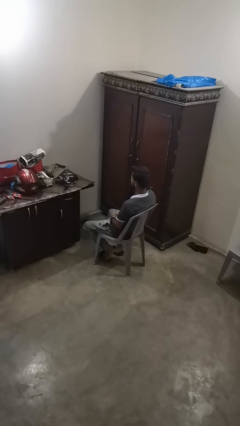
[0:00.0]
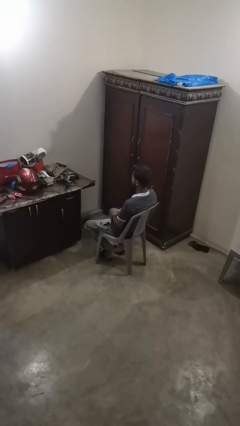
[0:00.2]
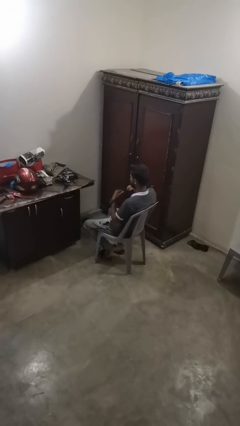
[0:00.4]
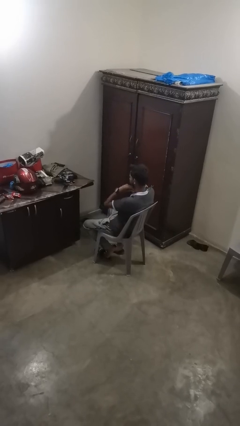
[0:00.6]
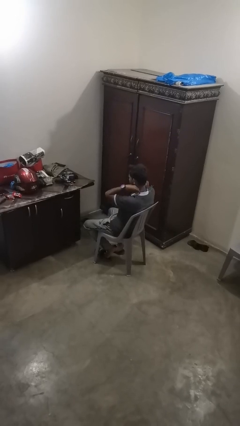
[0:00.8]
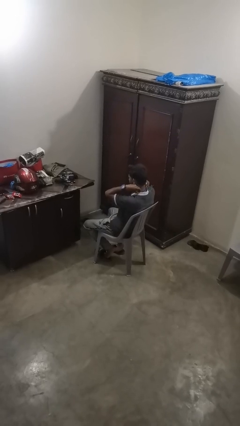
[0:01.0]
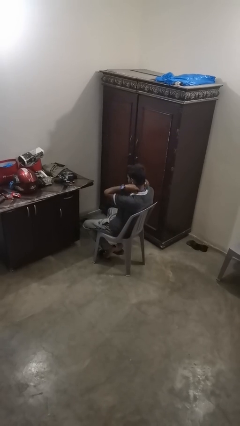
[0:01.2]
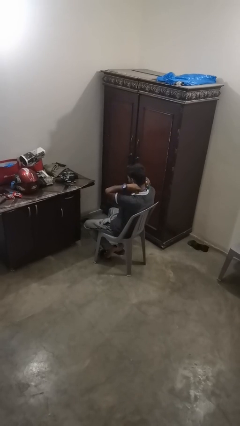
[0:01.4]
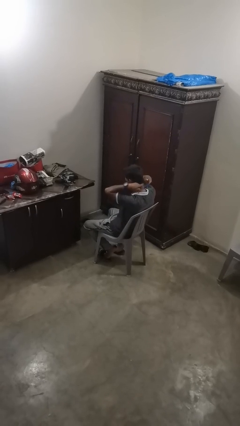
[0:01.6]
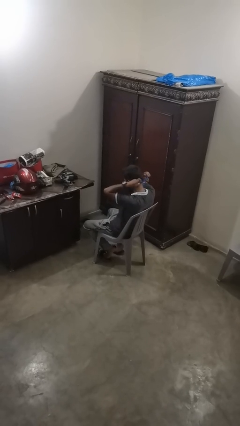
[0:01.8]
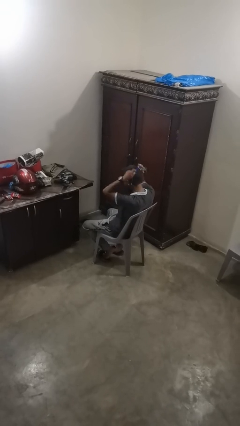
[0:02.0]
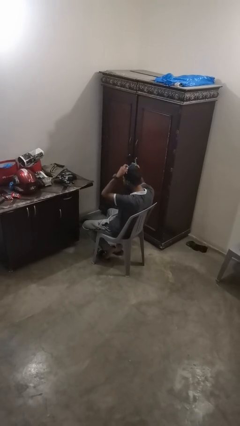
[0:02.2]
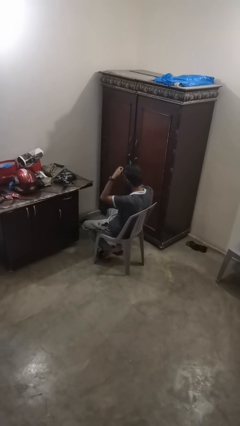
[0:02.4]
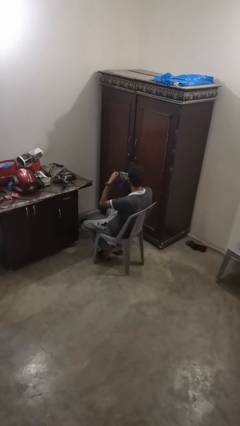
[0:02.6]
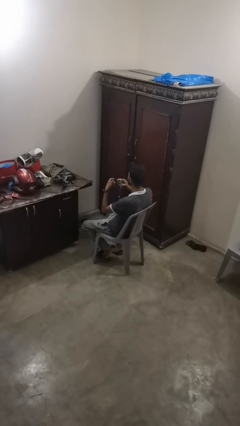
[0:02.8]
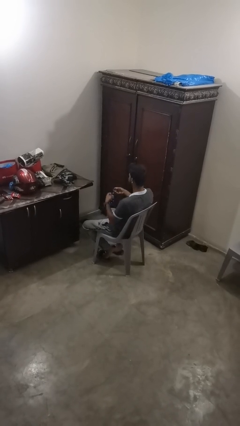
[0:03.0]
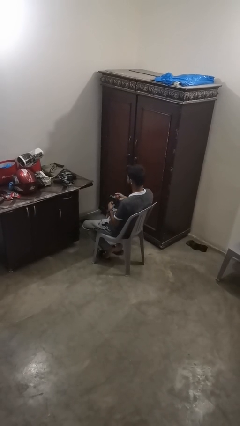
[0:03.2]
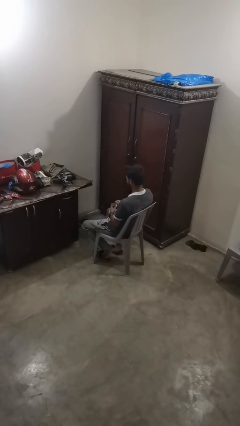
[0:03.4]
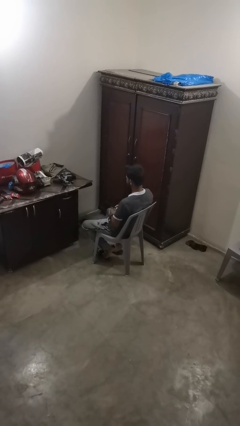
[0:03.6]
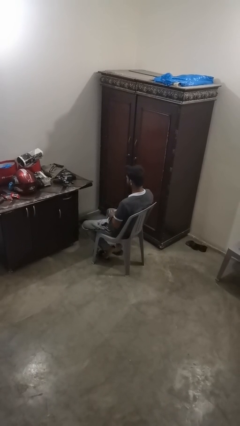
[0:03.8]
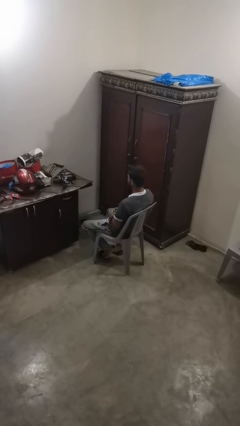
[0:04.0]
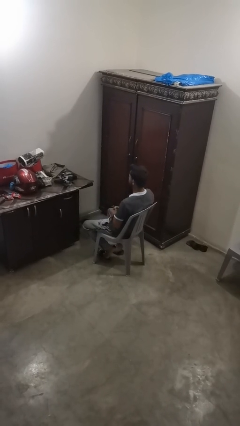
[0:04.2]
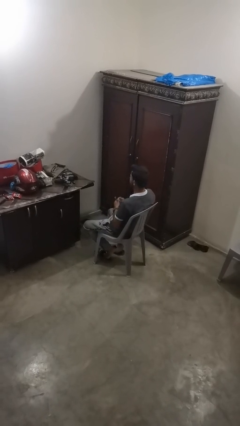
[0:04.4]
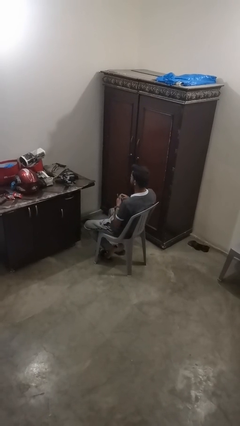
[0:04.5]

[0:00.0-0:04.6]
person takes off necklace

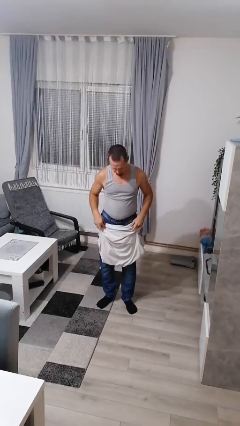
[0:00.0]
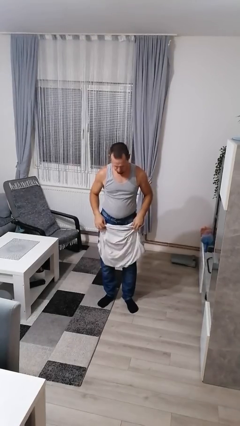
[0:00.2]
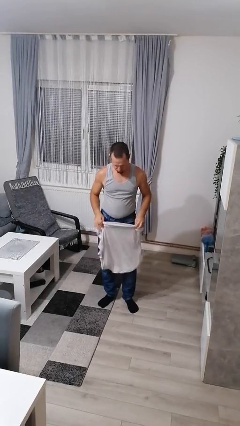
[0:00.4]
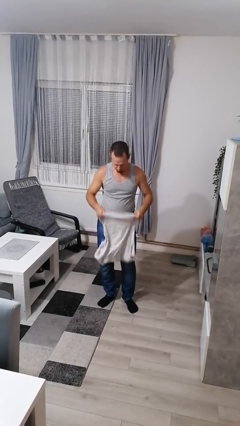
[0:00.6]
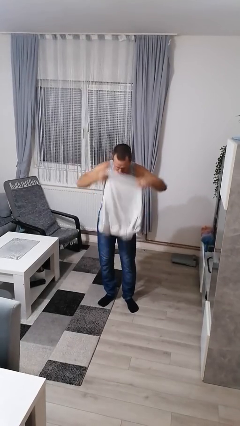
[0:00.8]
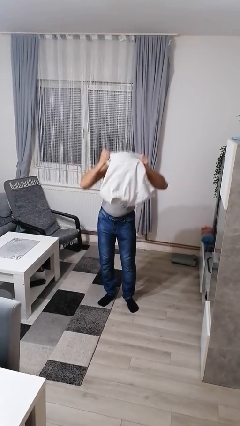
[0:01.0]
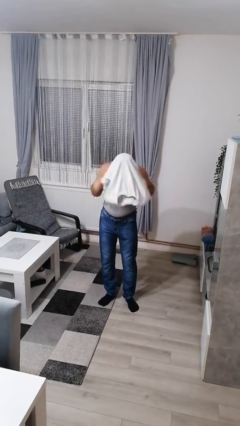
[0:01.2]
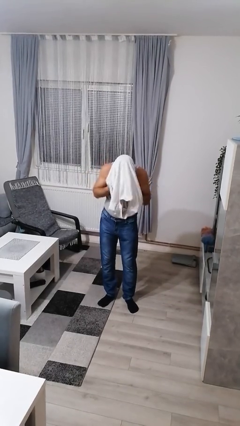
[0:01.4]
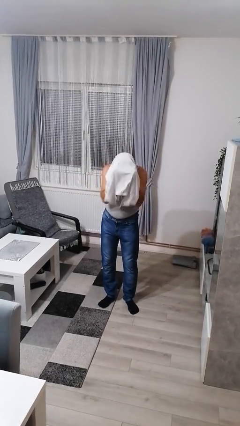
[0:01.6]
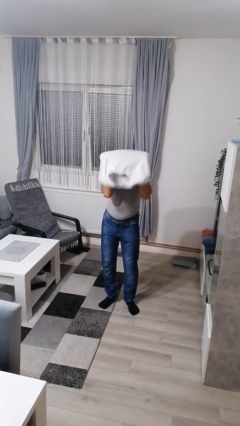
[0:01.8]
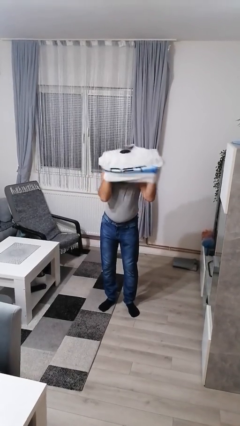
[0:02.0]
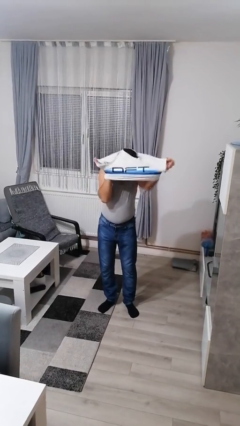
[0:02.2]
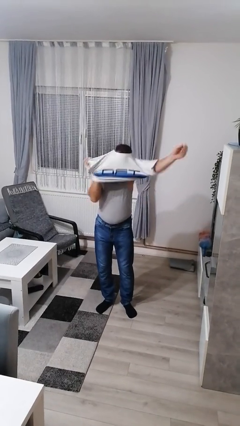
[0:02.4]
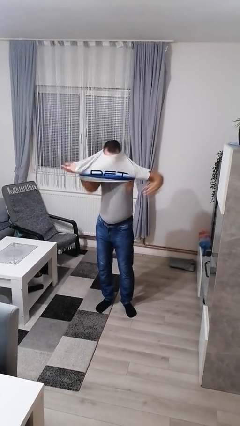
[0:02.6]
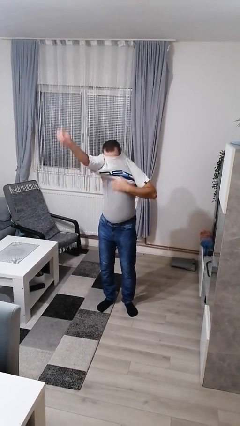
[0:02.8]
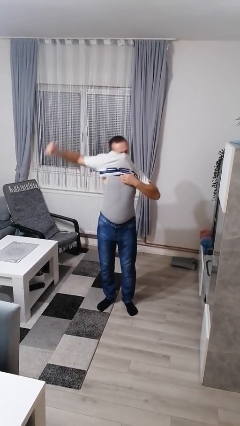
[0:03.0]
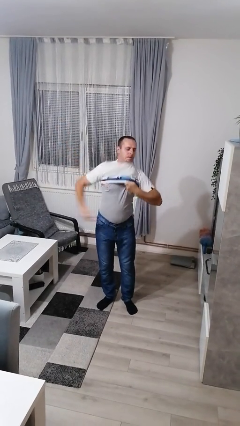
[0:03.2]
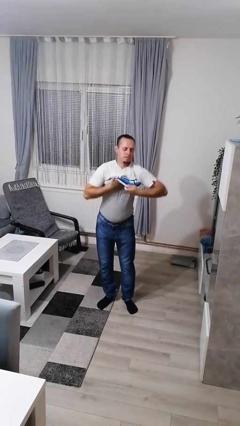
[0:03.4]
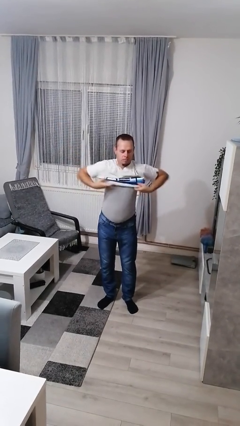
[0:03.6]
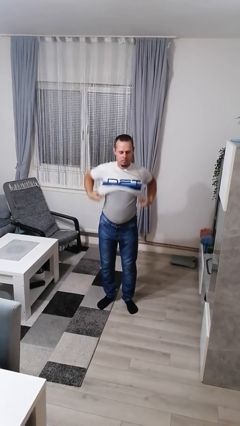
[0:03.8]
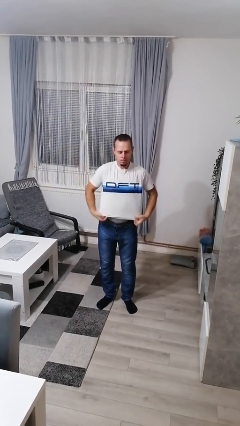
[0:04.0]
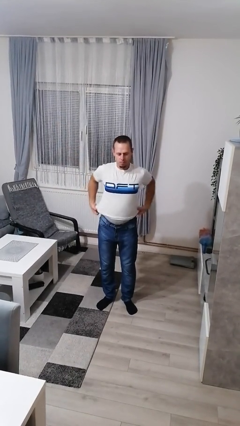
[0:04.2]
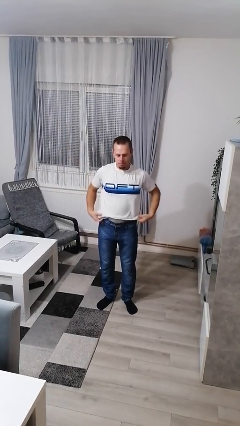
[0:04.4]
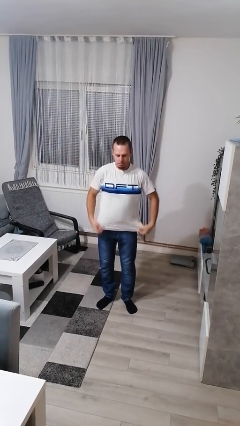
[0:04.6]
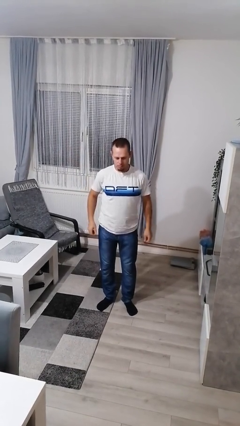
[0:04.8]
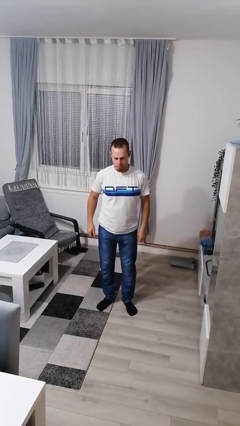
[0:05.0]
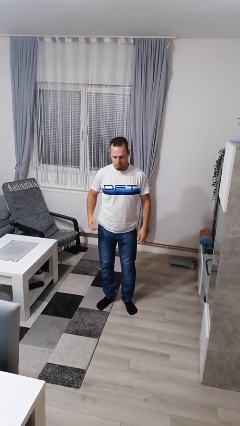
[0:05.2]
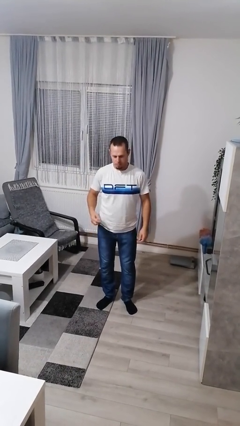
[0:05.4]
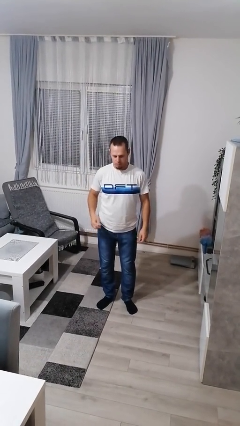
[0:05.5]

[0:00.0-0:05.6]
person puts on shirt

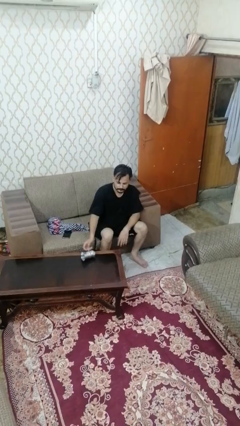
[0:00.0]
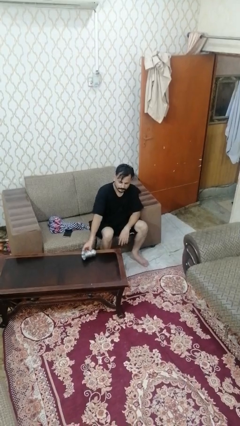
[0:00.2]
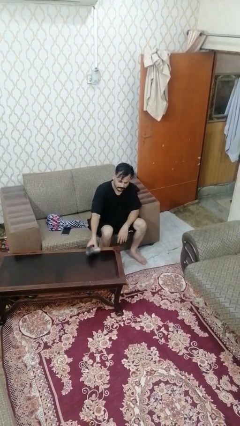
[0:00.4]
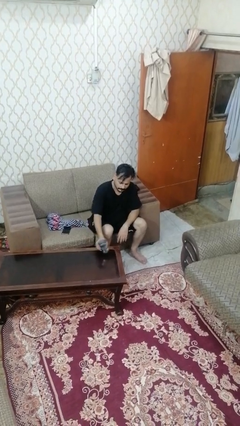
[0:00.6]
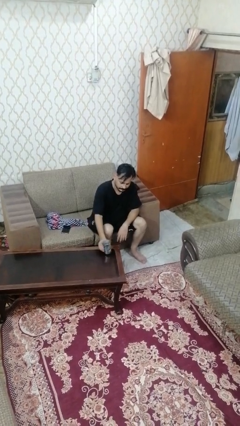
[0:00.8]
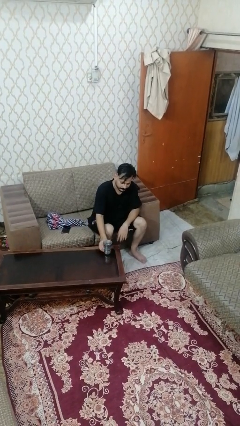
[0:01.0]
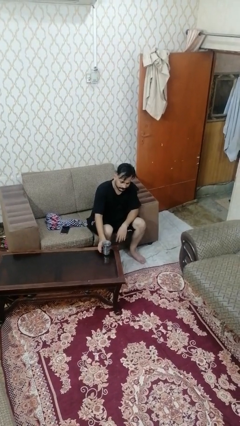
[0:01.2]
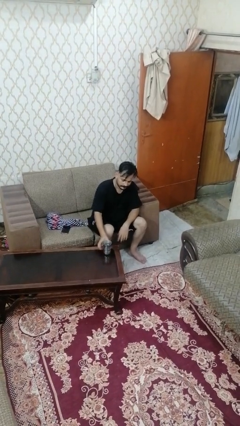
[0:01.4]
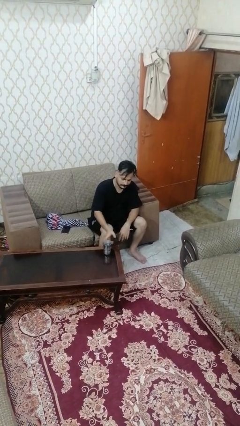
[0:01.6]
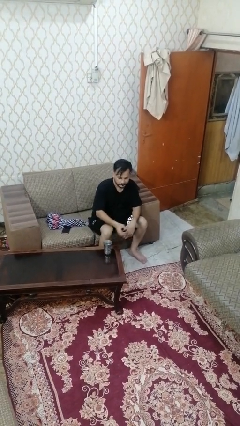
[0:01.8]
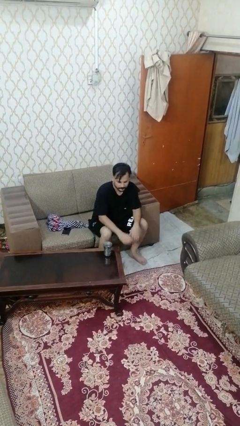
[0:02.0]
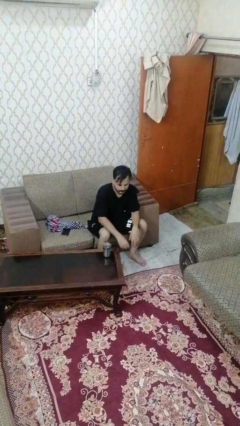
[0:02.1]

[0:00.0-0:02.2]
person sets upright glass

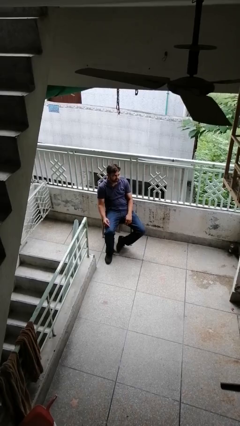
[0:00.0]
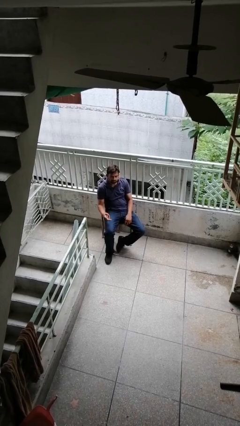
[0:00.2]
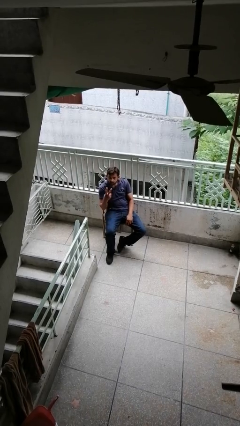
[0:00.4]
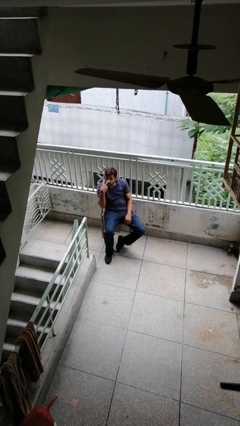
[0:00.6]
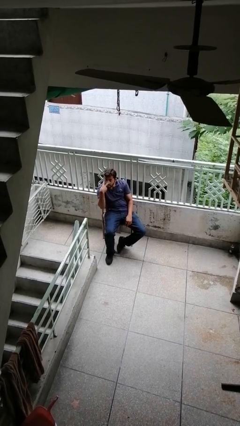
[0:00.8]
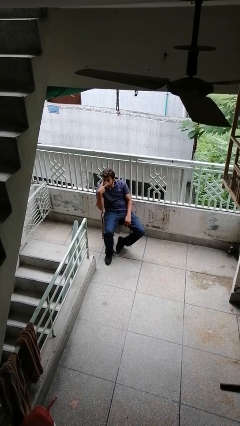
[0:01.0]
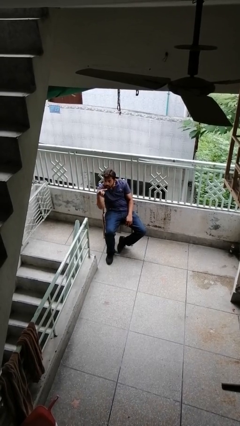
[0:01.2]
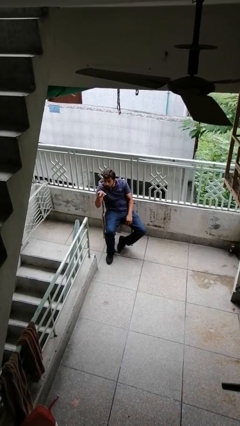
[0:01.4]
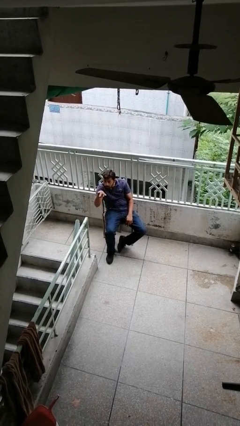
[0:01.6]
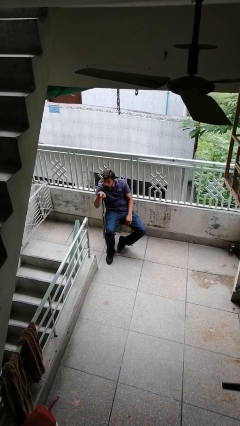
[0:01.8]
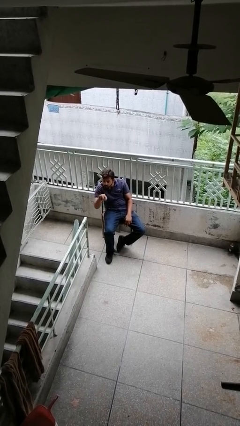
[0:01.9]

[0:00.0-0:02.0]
person gestures watch closely

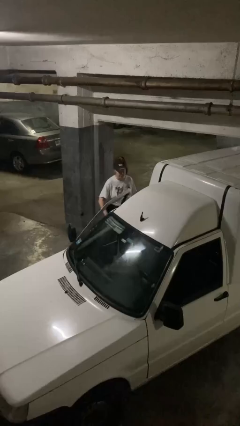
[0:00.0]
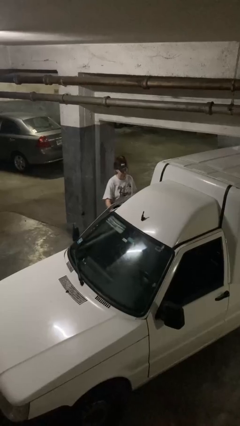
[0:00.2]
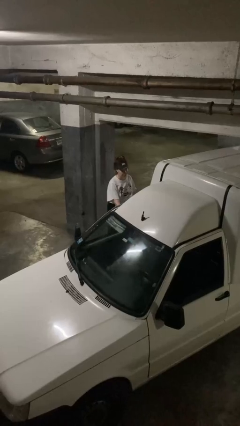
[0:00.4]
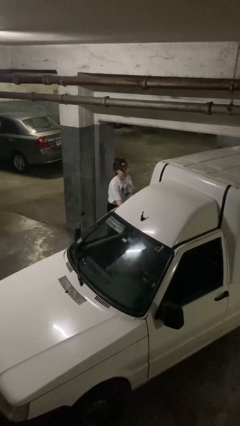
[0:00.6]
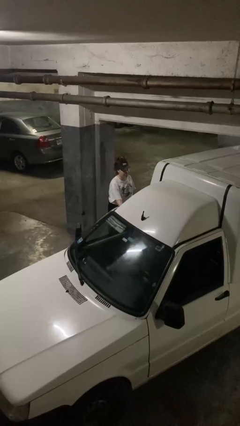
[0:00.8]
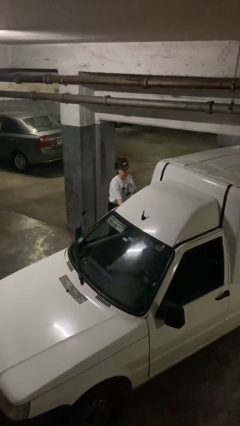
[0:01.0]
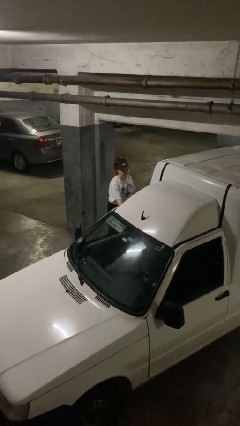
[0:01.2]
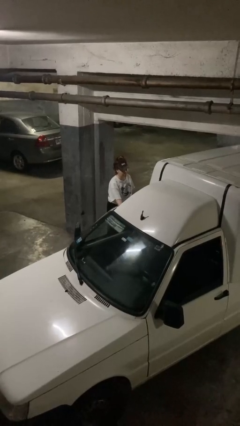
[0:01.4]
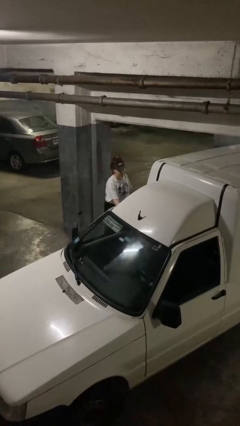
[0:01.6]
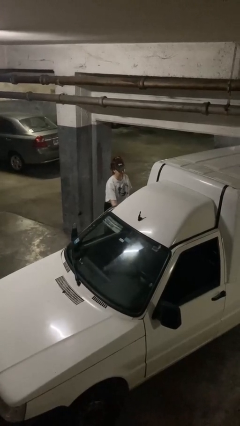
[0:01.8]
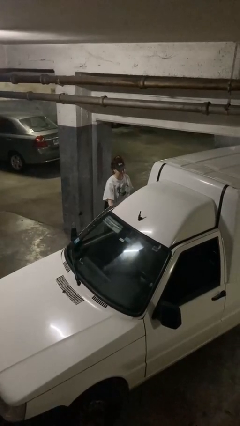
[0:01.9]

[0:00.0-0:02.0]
person closes car door

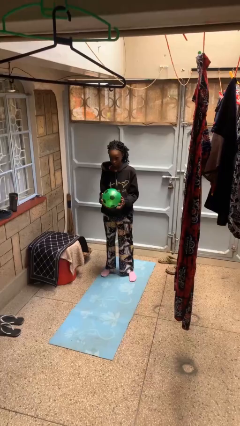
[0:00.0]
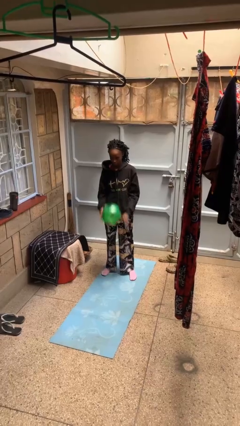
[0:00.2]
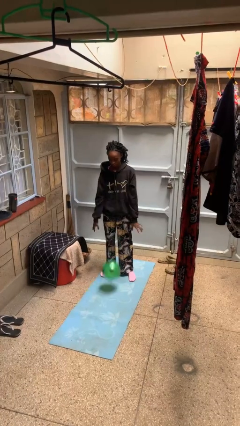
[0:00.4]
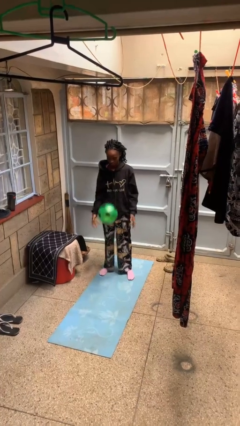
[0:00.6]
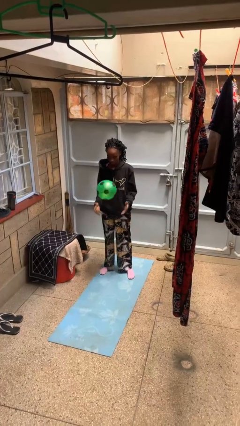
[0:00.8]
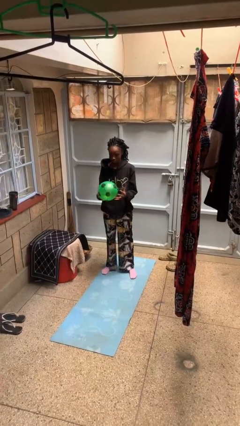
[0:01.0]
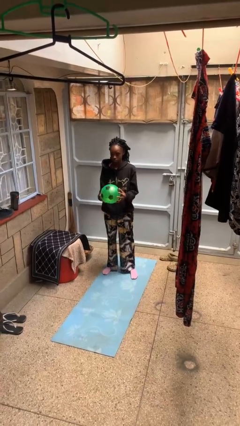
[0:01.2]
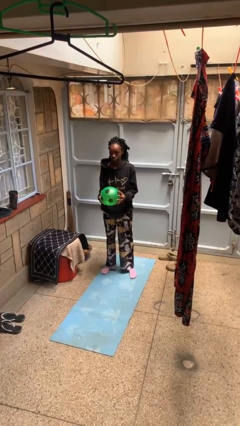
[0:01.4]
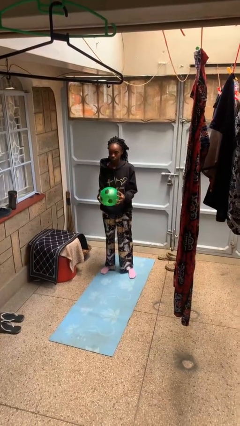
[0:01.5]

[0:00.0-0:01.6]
person bounces ball on floor
